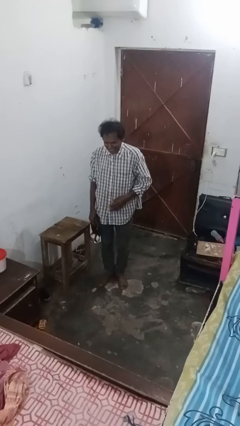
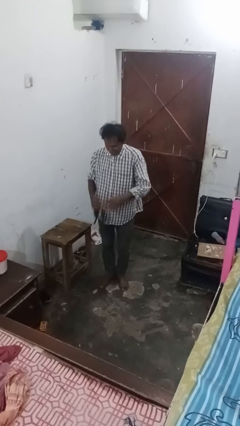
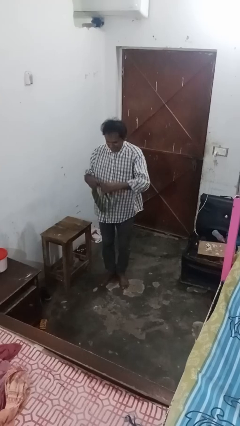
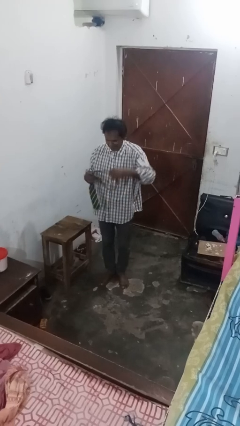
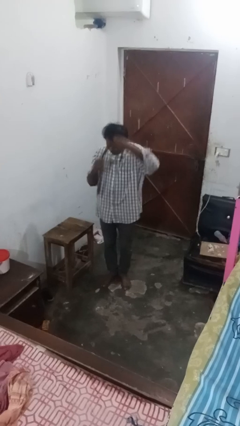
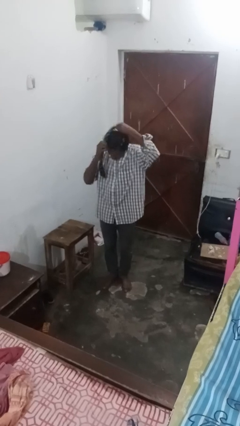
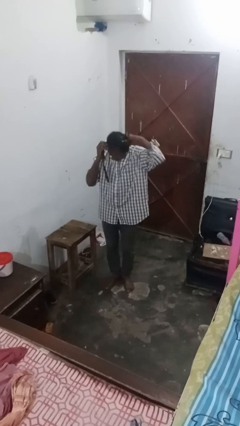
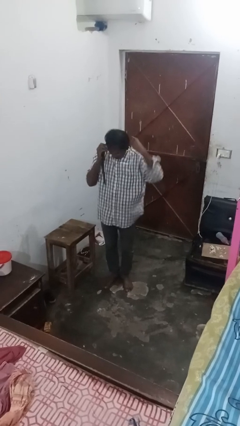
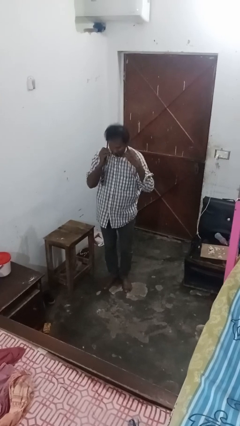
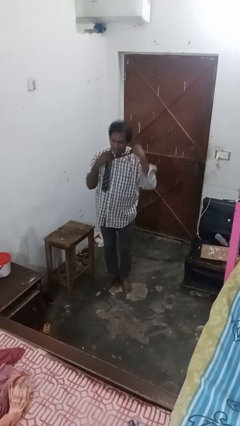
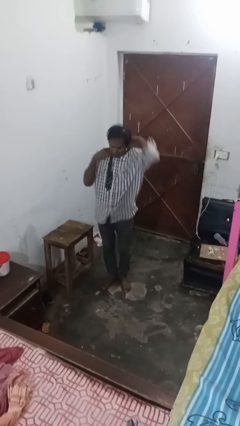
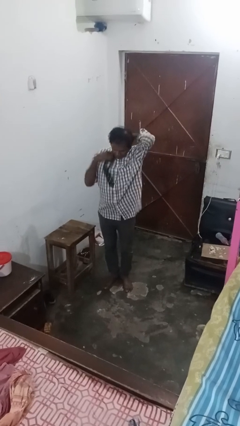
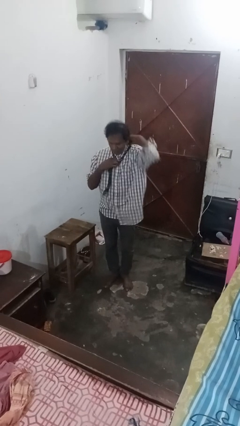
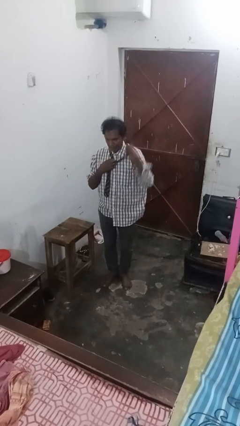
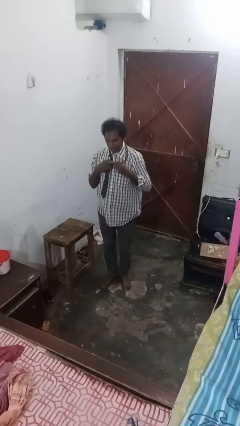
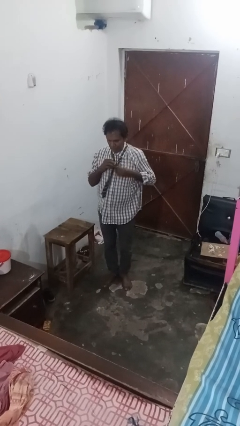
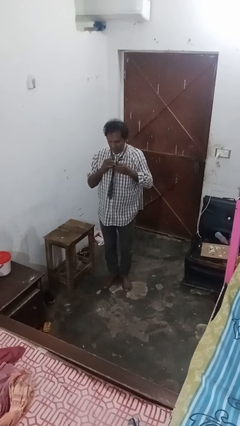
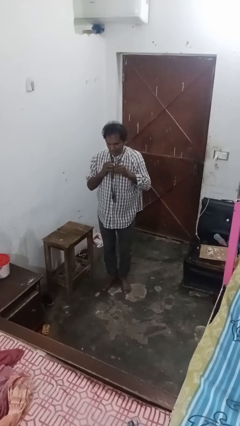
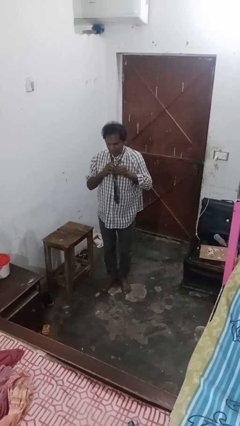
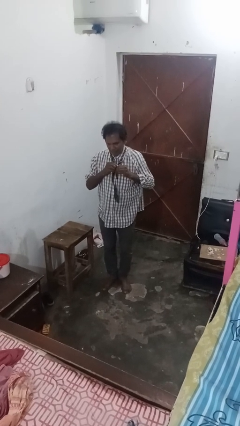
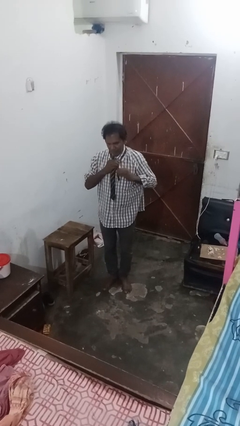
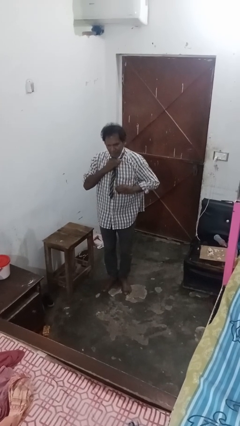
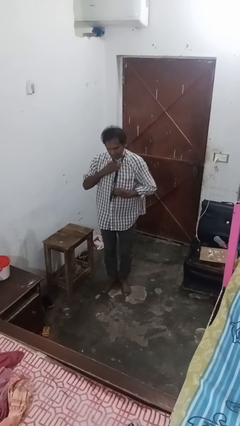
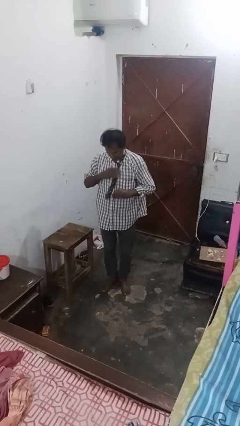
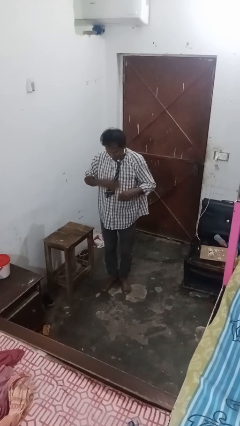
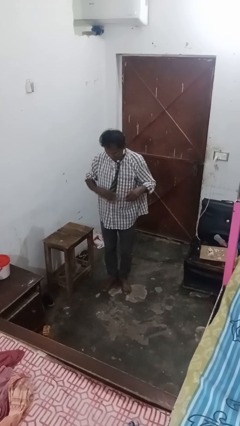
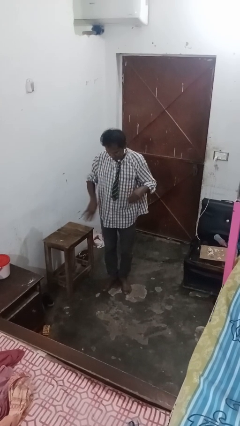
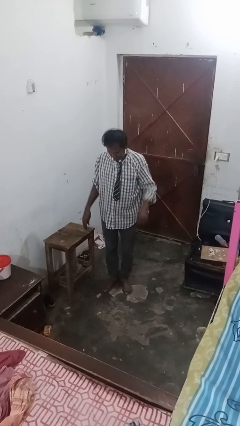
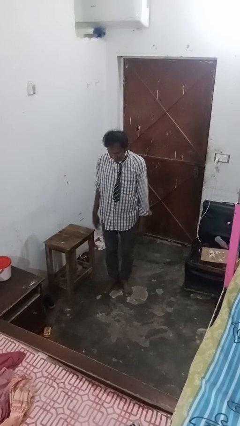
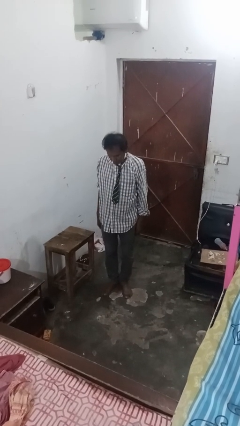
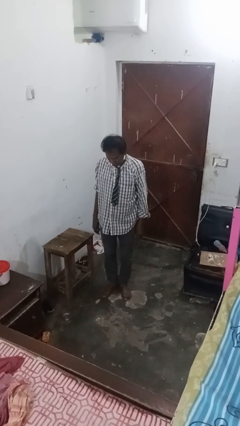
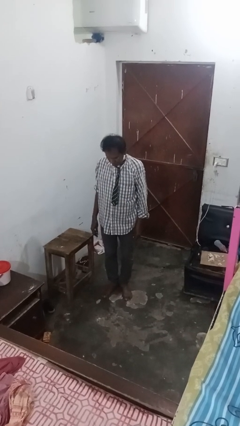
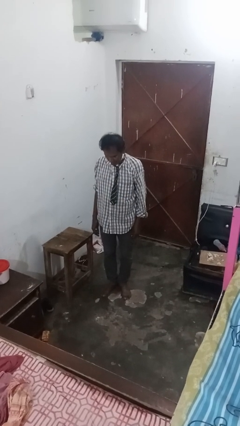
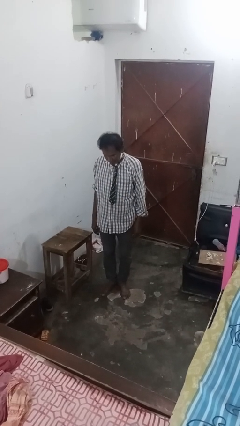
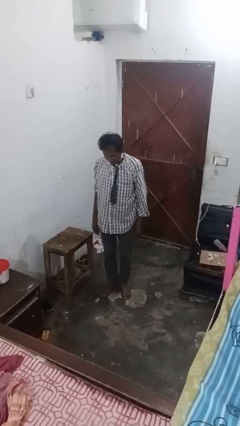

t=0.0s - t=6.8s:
person puts on necktie

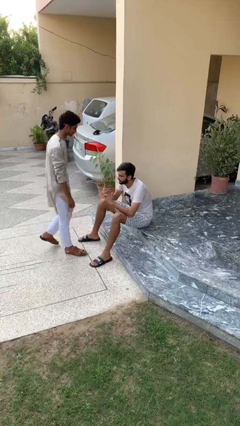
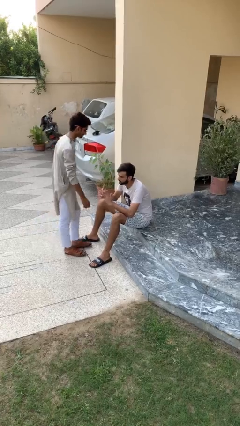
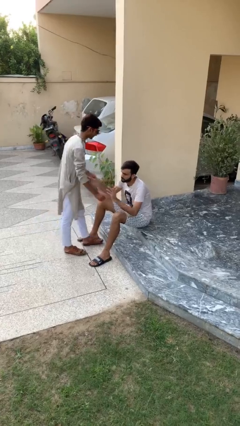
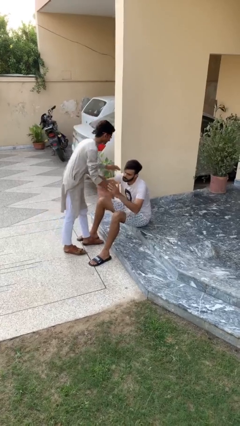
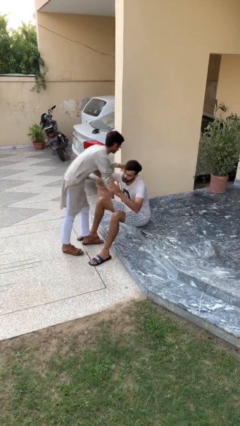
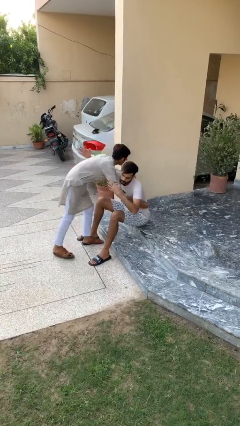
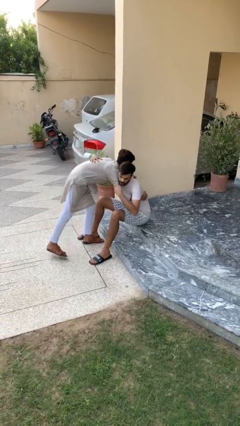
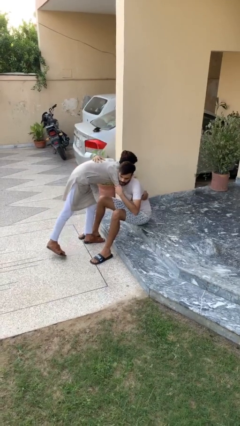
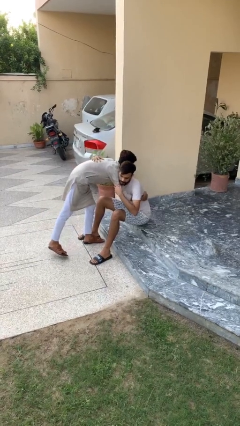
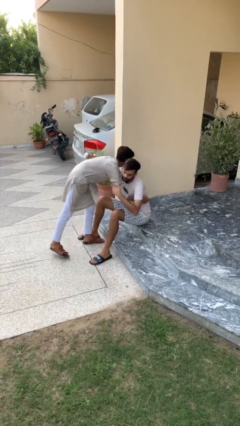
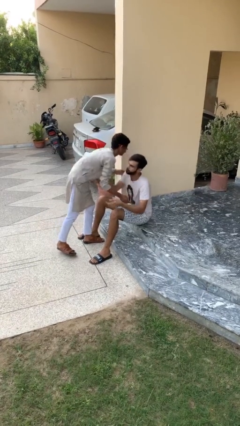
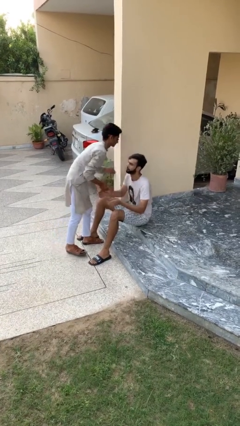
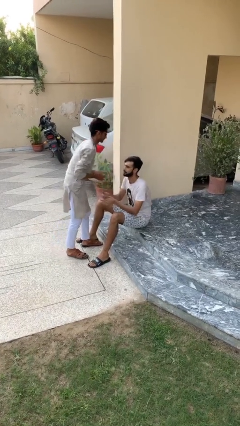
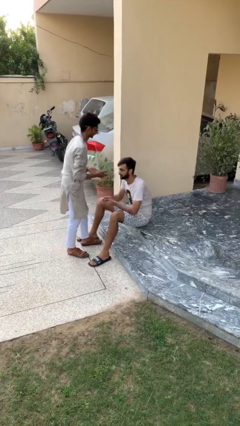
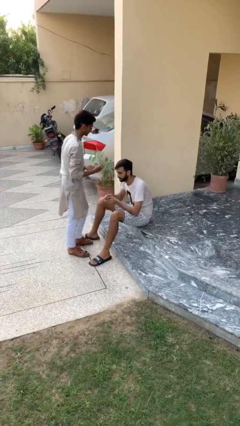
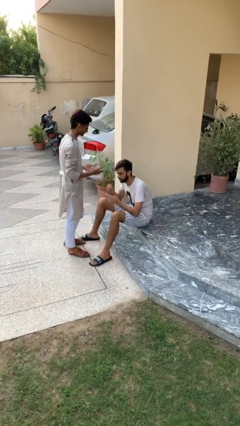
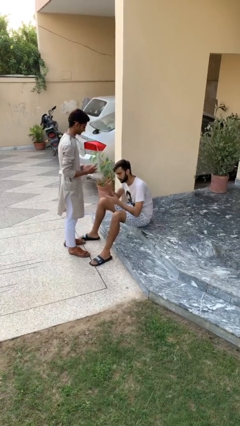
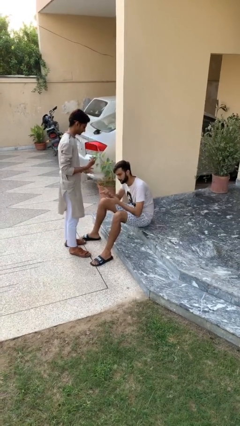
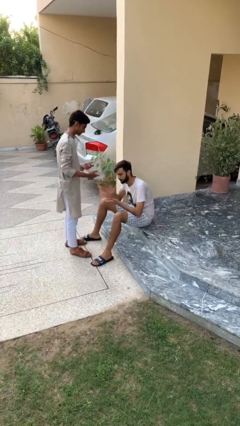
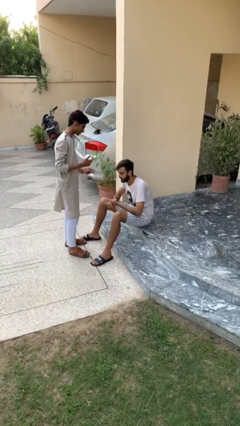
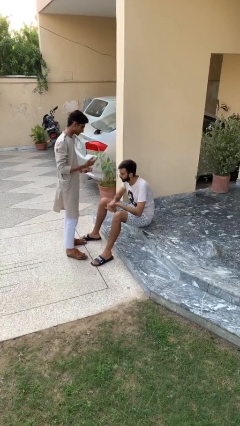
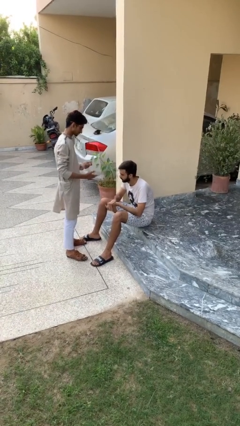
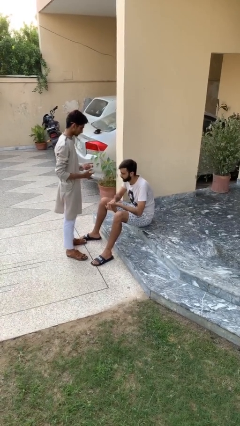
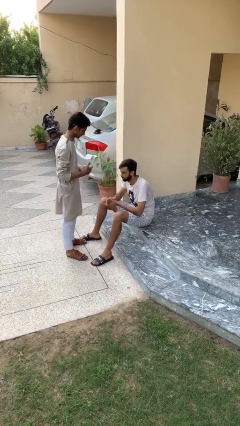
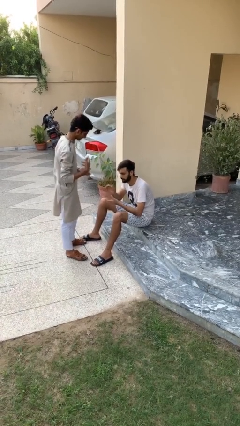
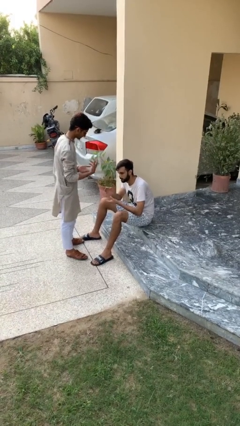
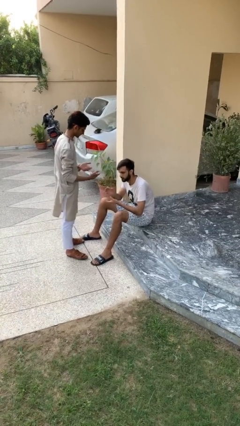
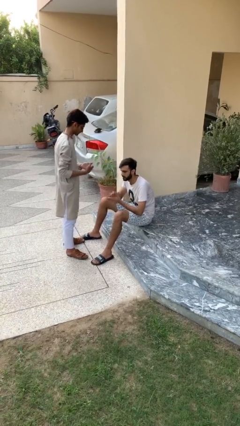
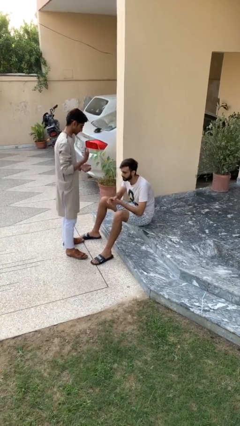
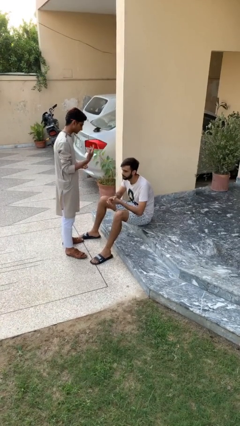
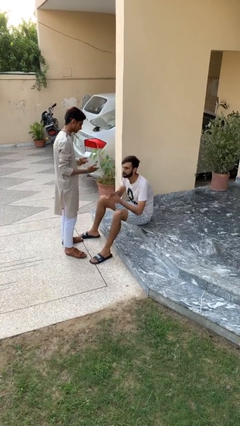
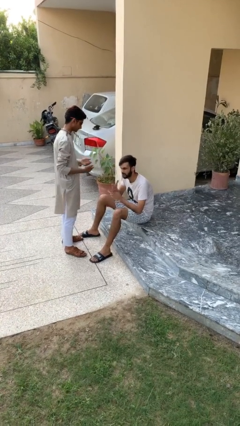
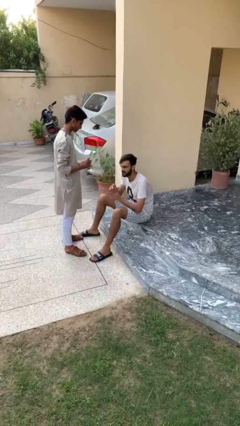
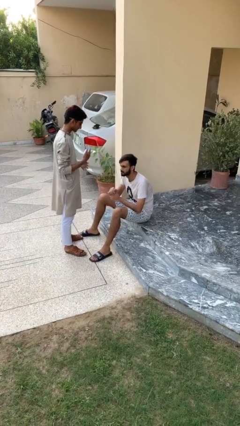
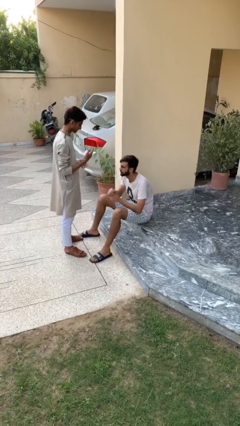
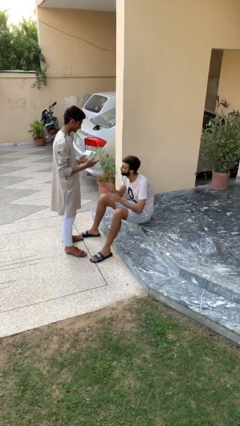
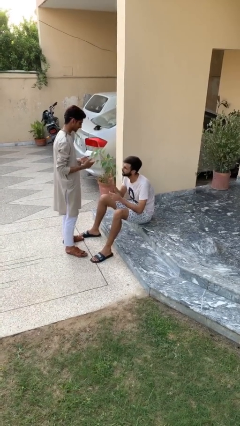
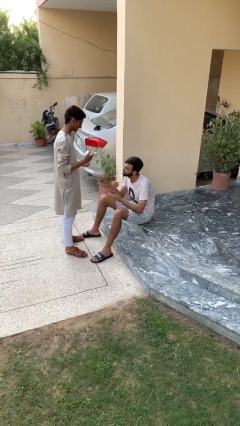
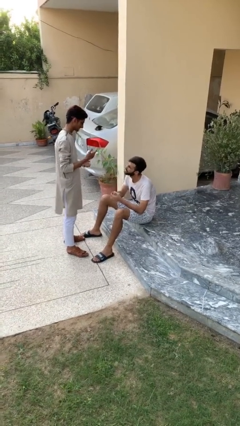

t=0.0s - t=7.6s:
person embraces person

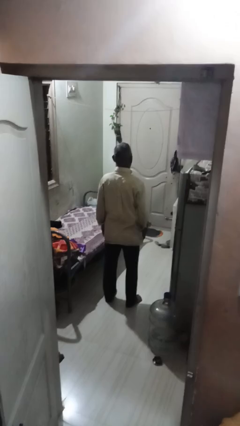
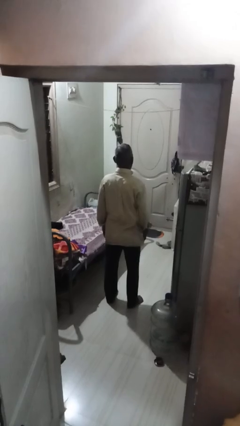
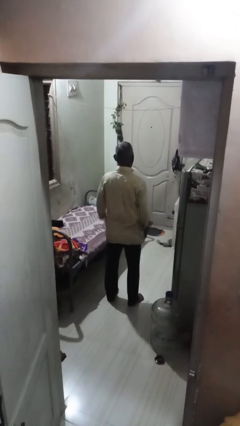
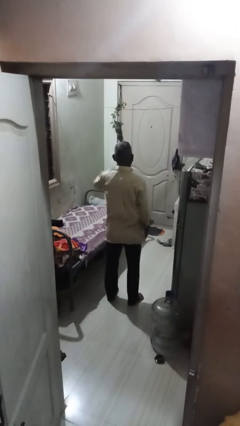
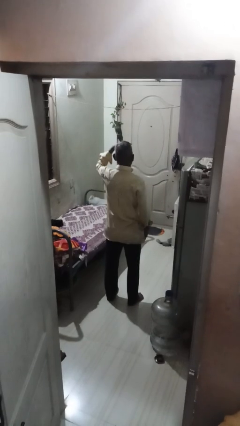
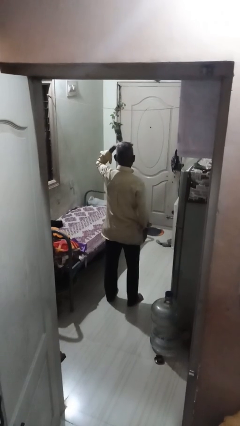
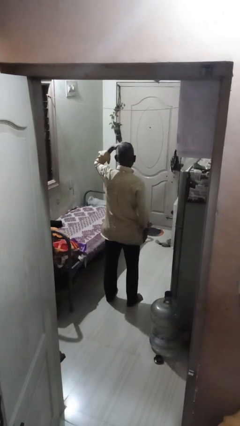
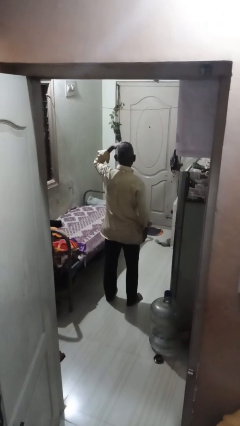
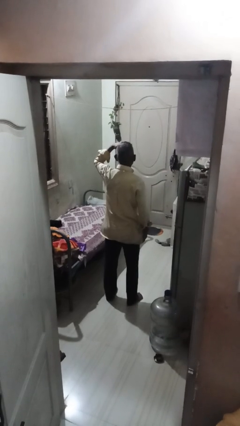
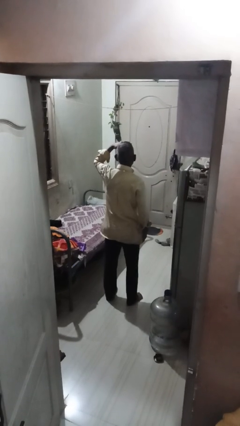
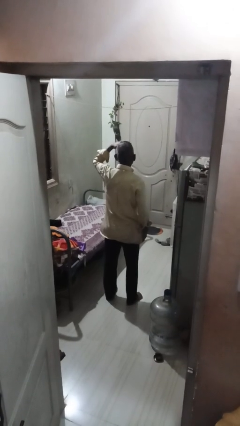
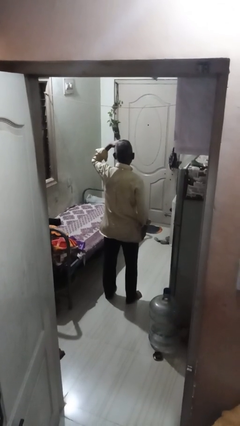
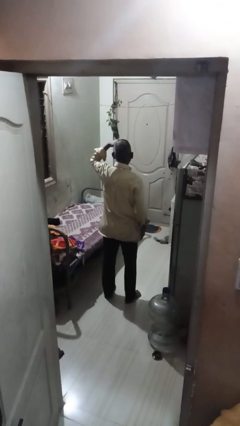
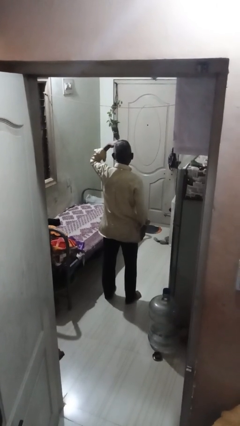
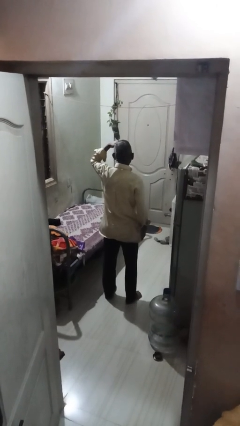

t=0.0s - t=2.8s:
person shades eyes

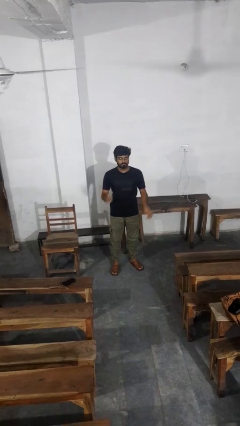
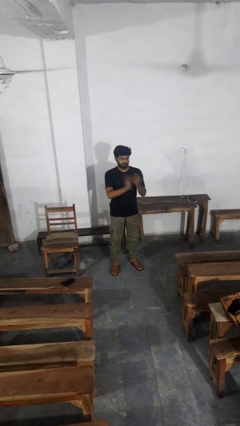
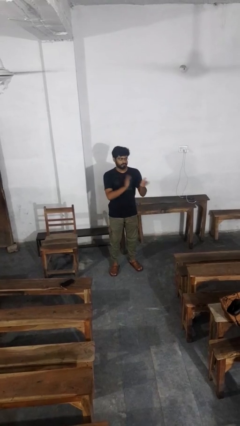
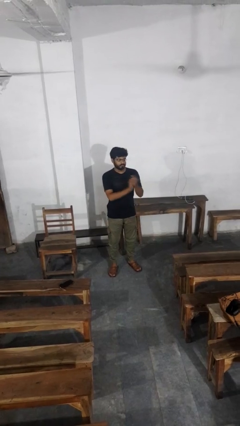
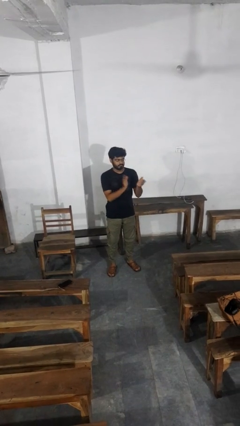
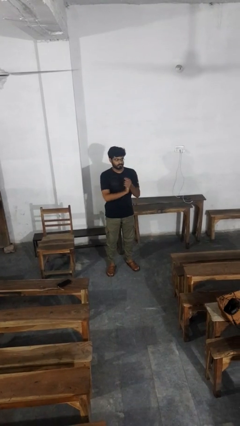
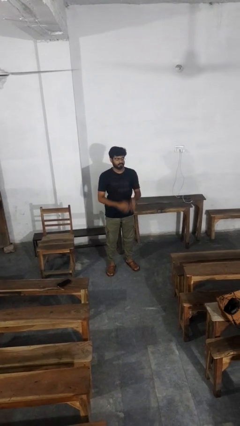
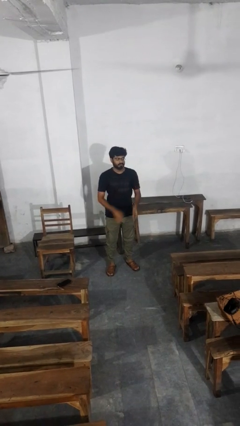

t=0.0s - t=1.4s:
person claps hands
